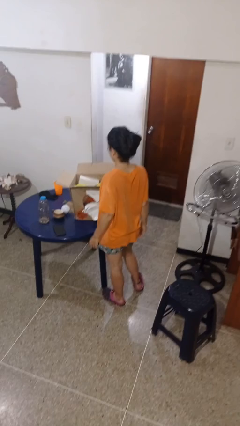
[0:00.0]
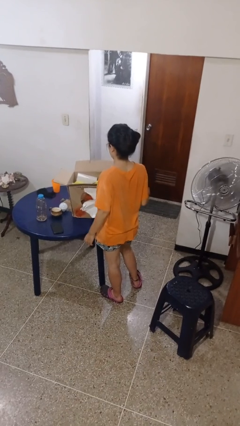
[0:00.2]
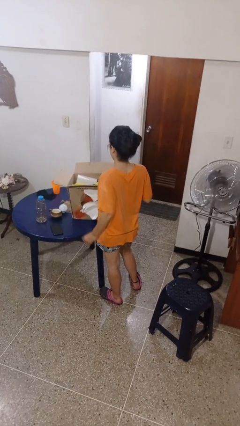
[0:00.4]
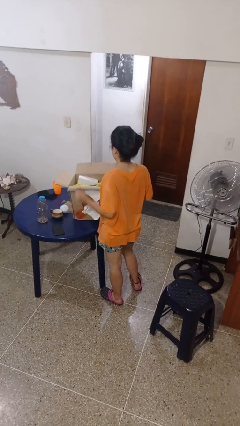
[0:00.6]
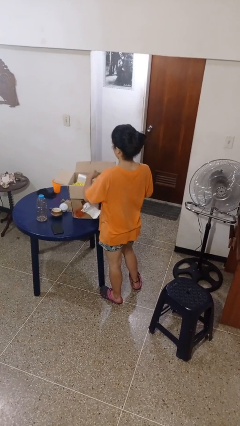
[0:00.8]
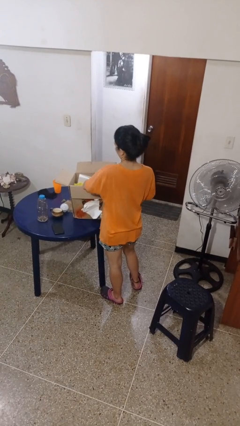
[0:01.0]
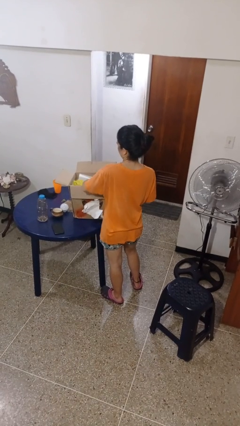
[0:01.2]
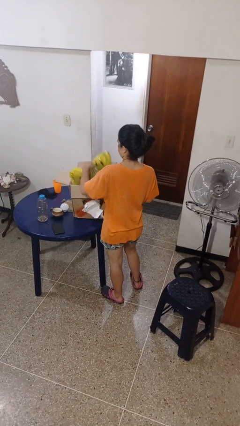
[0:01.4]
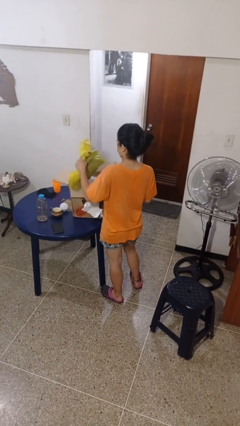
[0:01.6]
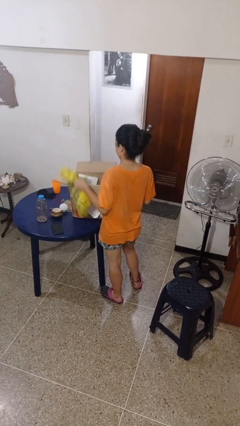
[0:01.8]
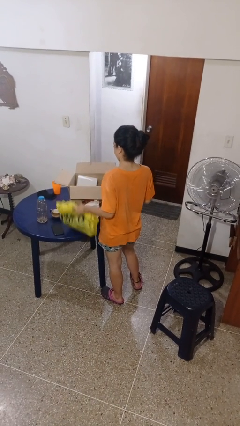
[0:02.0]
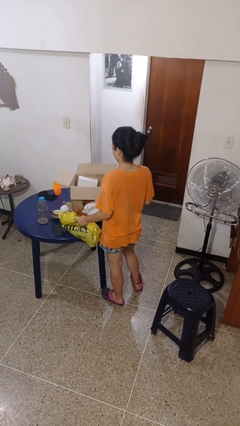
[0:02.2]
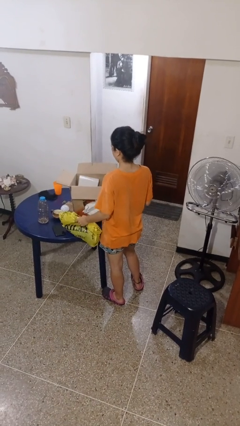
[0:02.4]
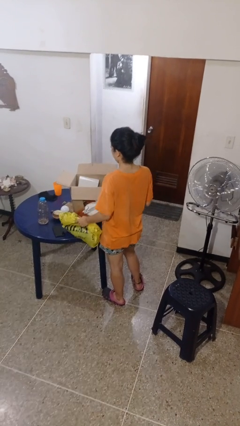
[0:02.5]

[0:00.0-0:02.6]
person takes object from box

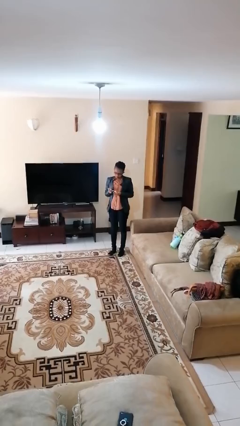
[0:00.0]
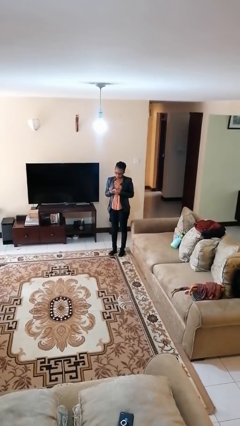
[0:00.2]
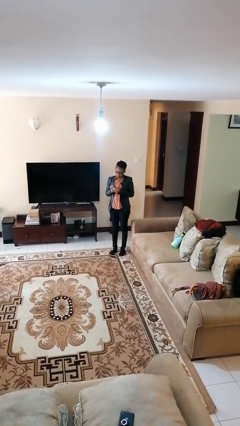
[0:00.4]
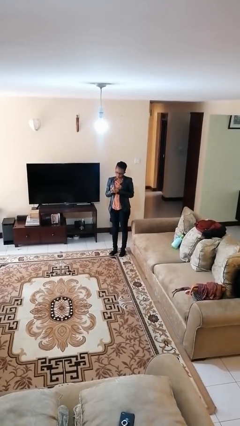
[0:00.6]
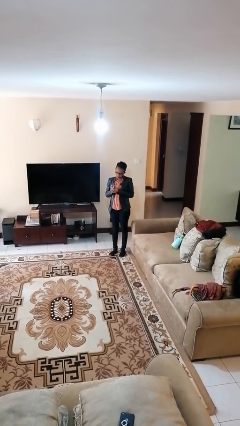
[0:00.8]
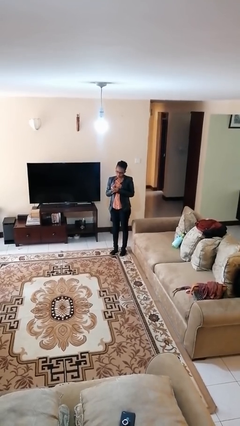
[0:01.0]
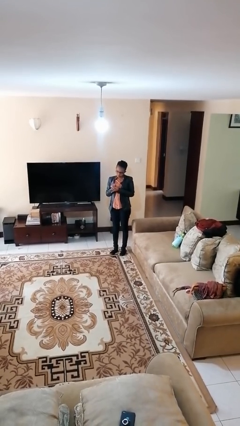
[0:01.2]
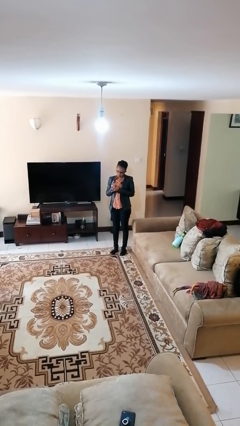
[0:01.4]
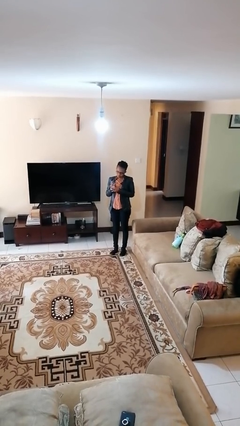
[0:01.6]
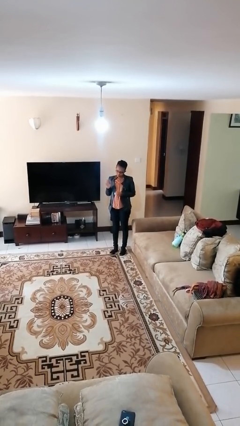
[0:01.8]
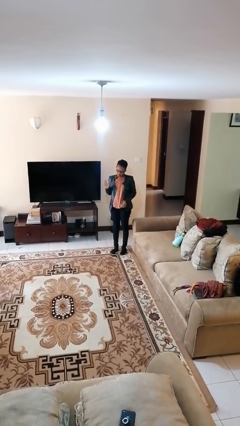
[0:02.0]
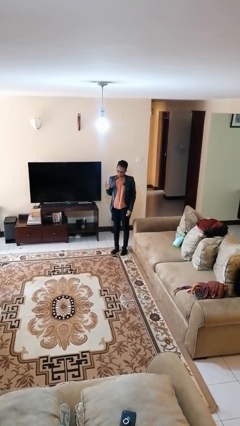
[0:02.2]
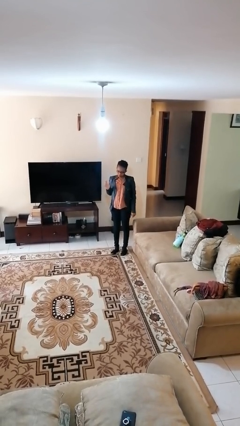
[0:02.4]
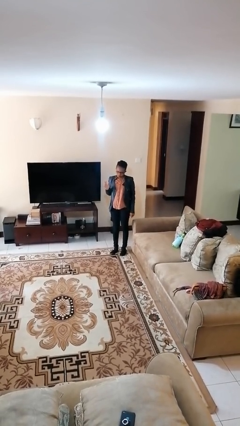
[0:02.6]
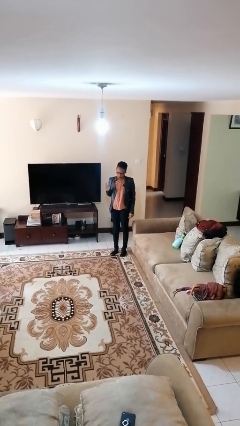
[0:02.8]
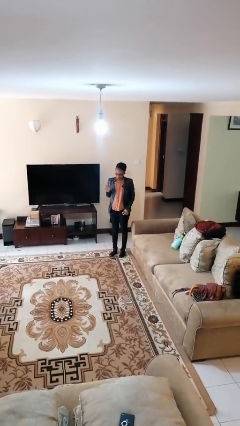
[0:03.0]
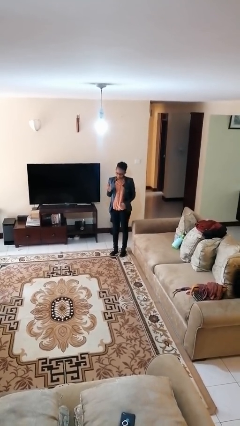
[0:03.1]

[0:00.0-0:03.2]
person puts on ring

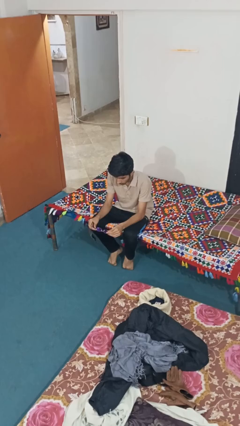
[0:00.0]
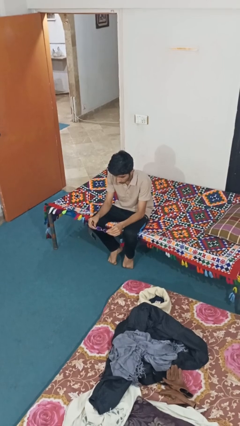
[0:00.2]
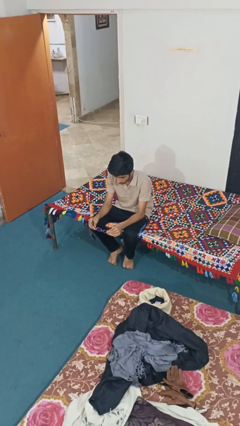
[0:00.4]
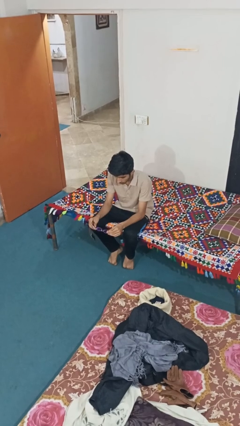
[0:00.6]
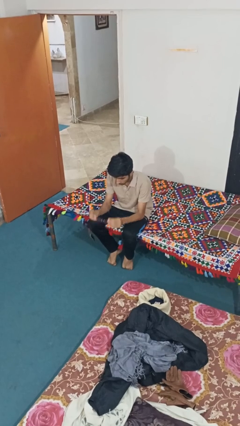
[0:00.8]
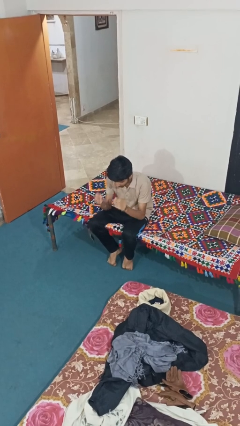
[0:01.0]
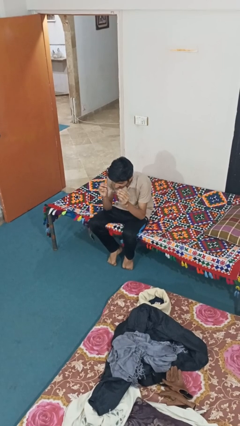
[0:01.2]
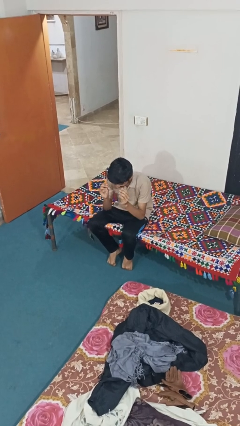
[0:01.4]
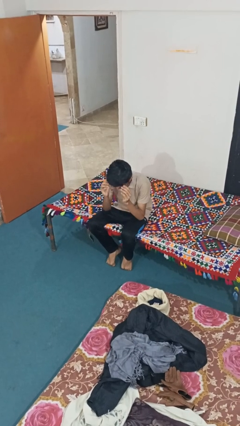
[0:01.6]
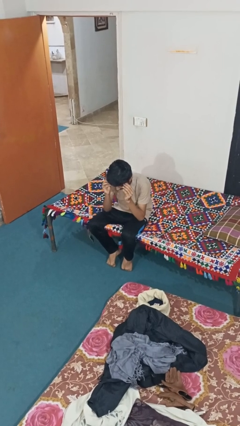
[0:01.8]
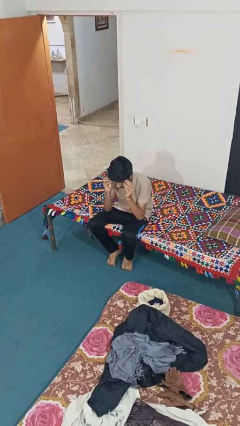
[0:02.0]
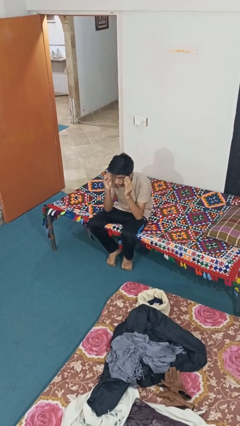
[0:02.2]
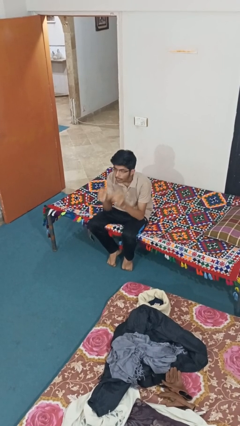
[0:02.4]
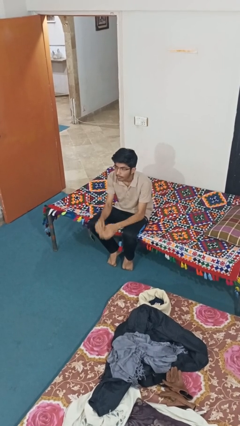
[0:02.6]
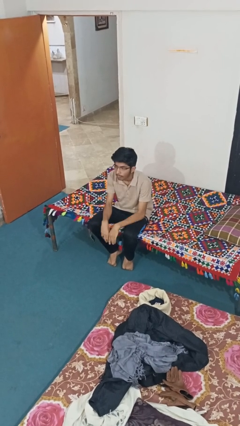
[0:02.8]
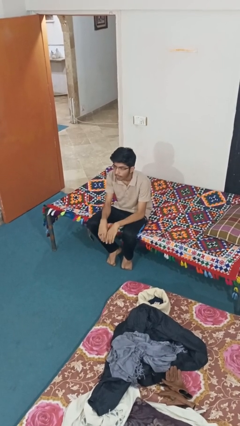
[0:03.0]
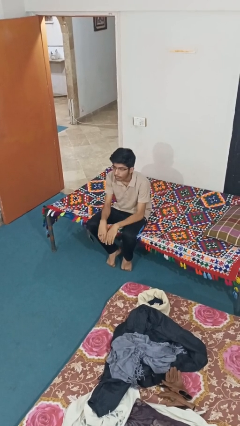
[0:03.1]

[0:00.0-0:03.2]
person puts on glasses

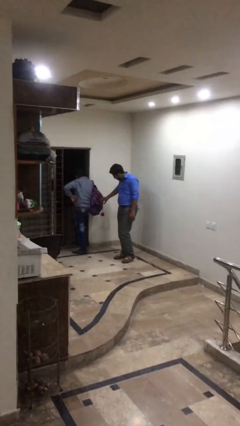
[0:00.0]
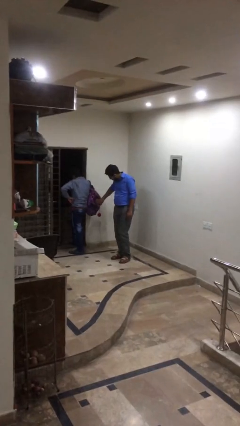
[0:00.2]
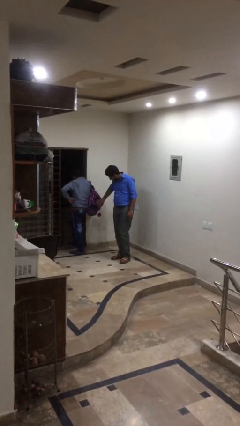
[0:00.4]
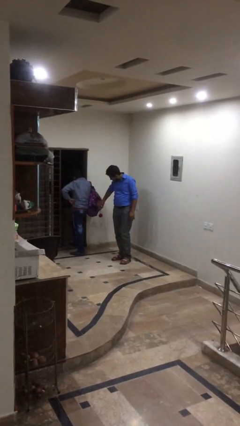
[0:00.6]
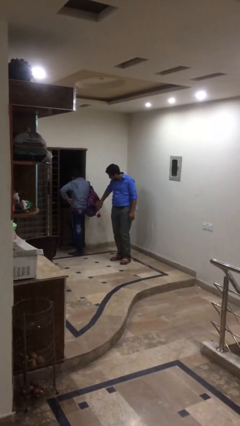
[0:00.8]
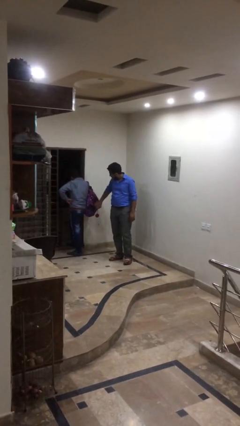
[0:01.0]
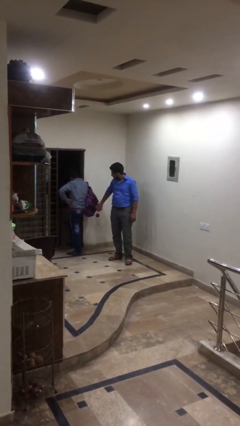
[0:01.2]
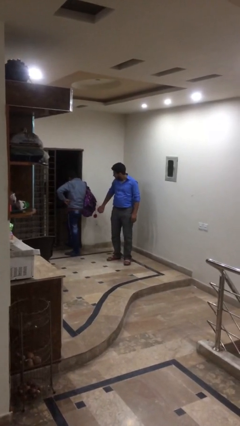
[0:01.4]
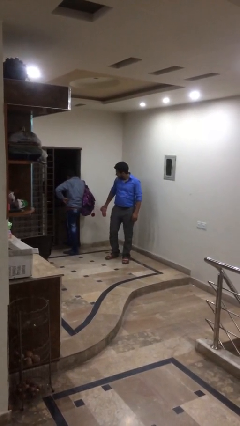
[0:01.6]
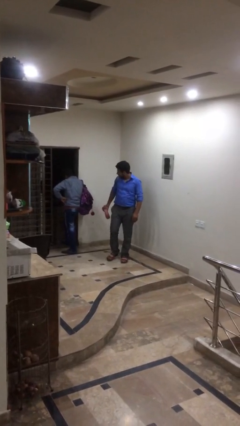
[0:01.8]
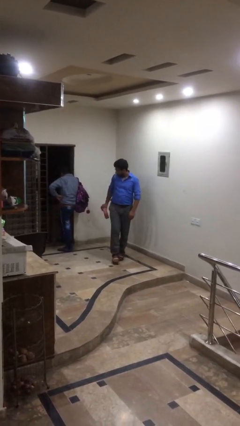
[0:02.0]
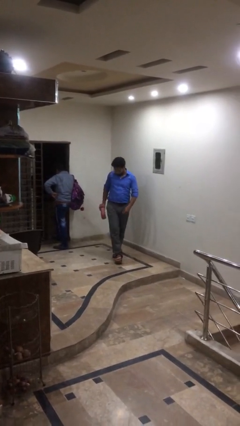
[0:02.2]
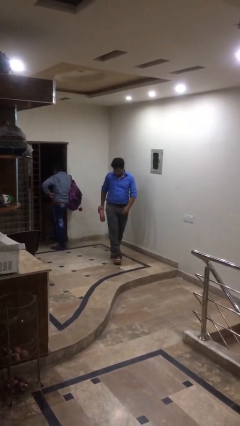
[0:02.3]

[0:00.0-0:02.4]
person steals object from person

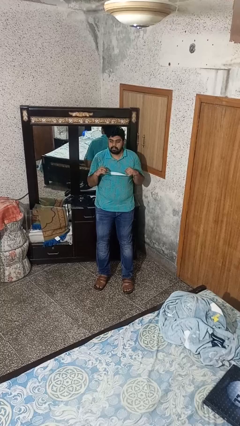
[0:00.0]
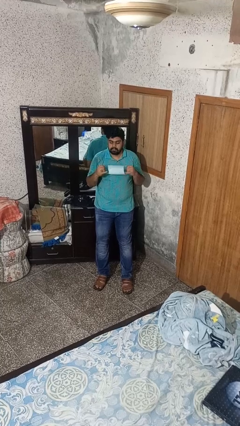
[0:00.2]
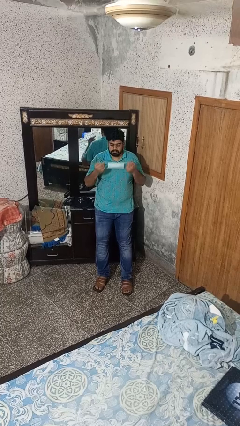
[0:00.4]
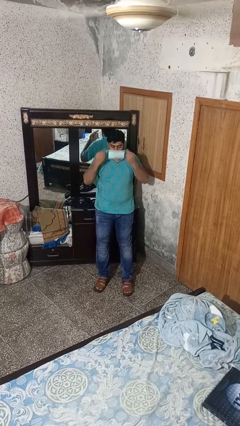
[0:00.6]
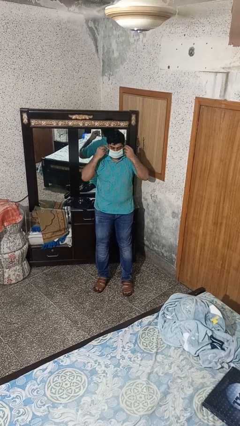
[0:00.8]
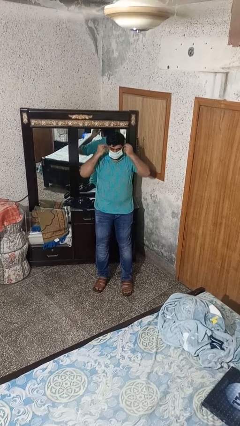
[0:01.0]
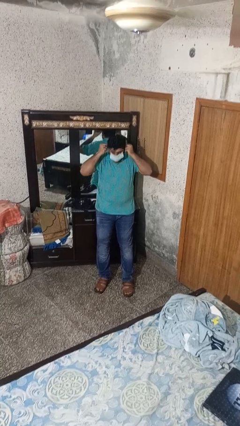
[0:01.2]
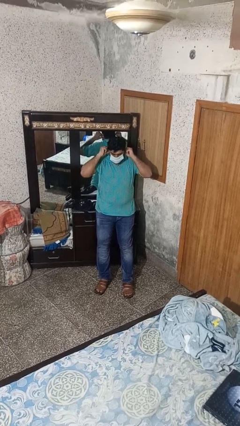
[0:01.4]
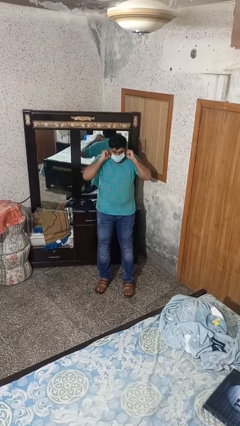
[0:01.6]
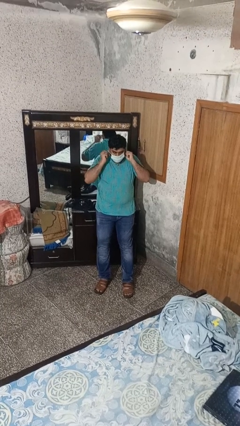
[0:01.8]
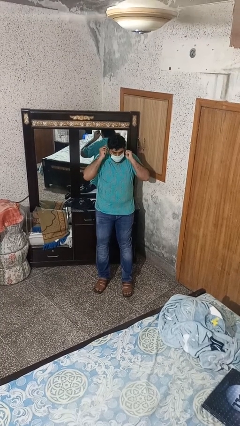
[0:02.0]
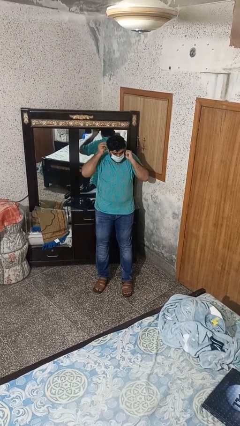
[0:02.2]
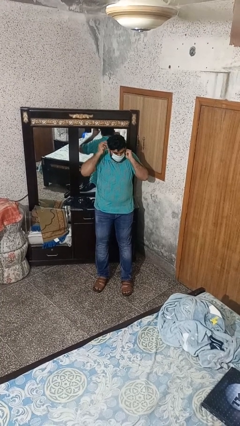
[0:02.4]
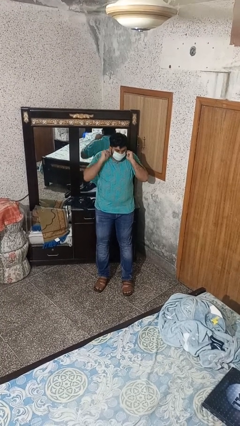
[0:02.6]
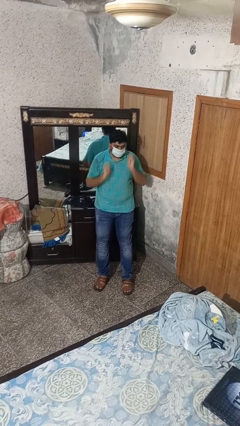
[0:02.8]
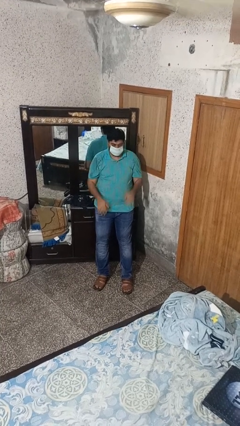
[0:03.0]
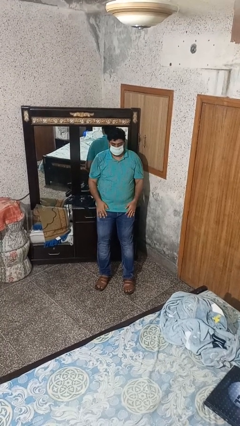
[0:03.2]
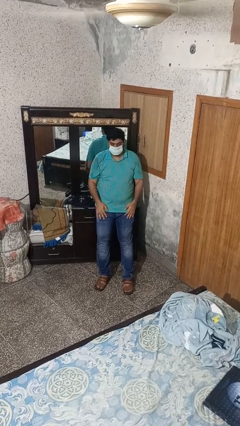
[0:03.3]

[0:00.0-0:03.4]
person puts on facemask

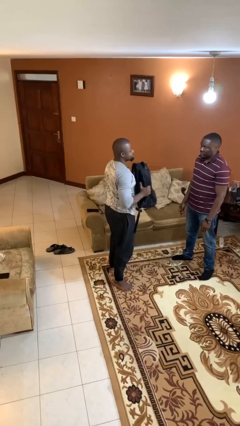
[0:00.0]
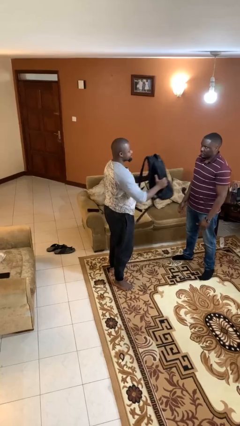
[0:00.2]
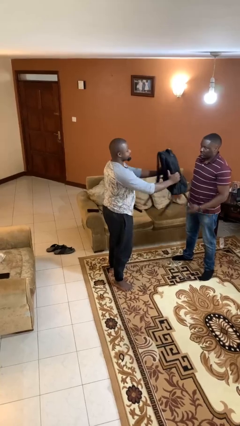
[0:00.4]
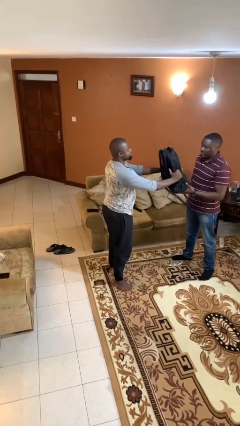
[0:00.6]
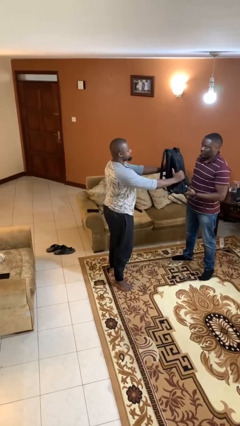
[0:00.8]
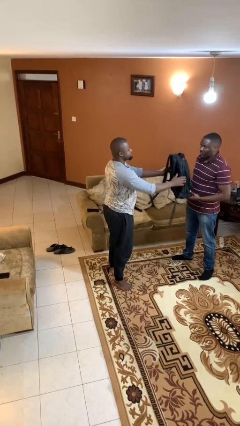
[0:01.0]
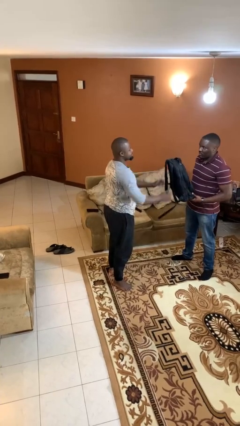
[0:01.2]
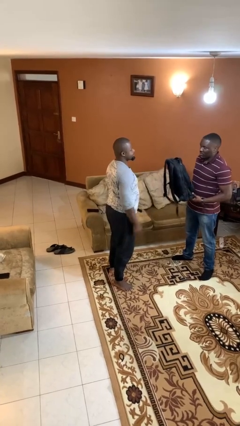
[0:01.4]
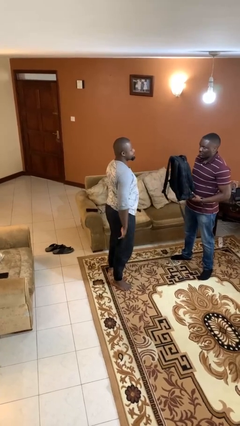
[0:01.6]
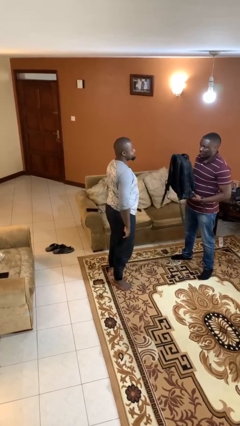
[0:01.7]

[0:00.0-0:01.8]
person transfers object to person

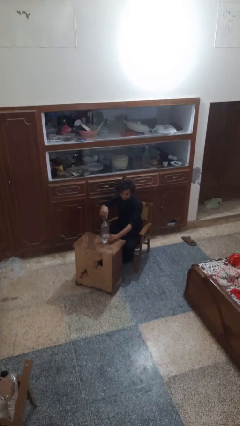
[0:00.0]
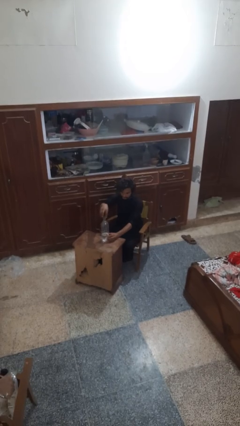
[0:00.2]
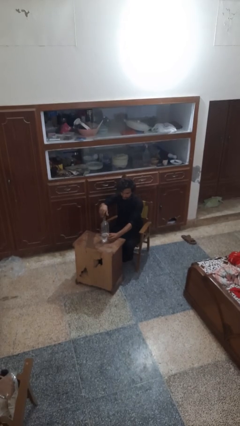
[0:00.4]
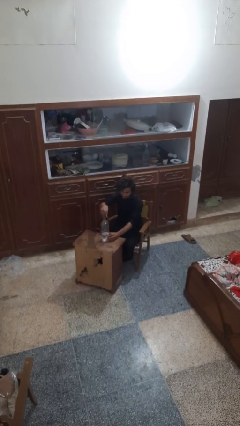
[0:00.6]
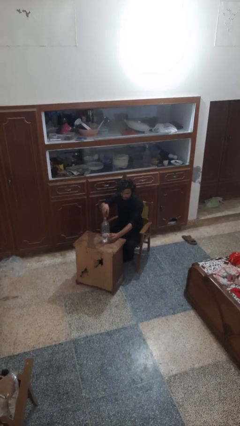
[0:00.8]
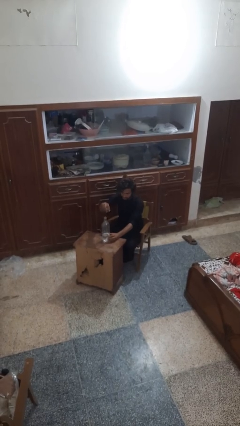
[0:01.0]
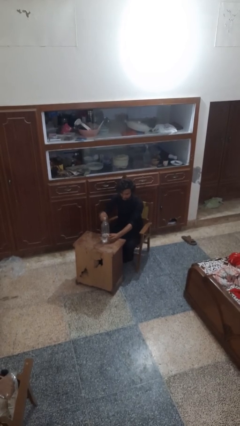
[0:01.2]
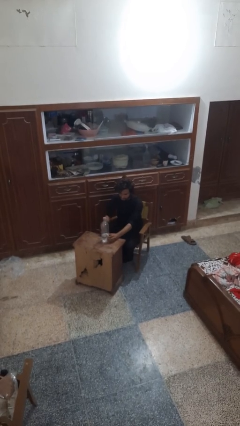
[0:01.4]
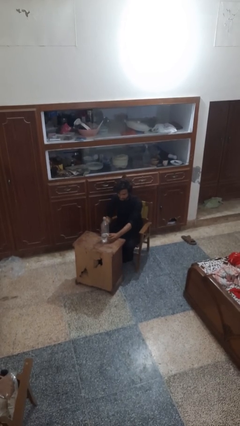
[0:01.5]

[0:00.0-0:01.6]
person unscrews lid from bottle
